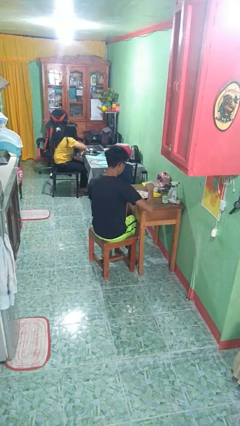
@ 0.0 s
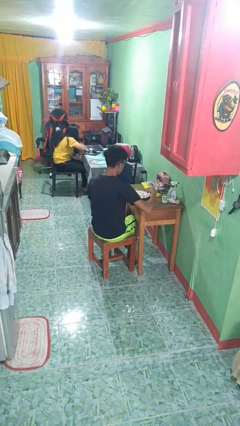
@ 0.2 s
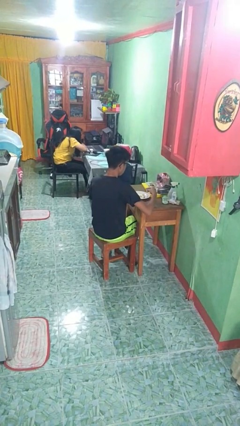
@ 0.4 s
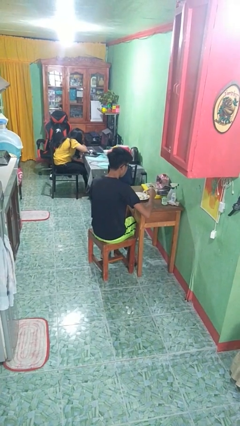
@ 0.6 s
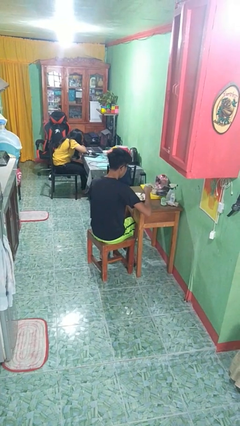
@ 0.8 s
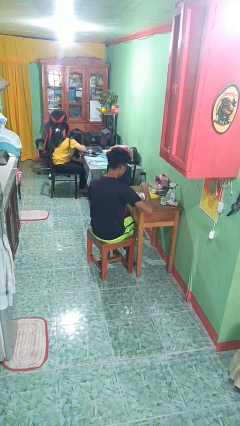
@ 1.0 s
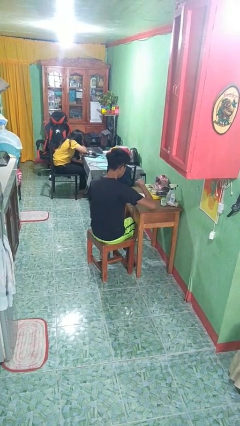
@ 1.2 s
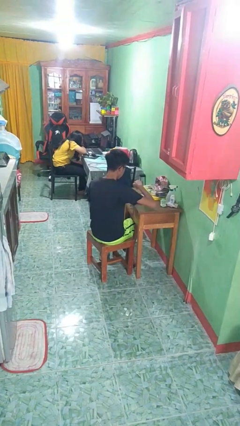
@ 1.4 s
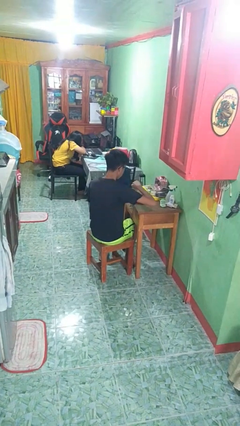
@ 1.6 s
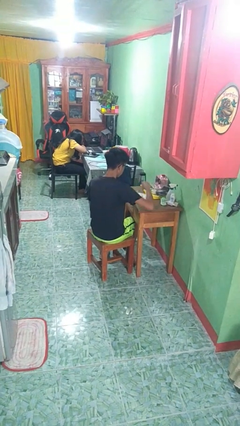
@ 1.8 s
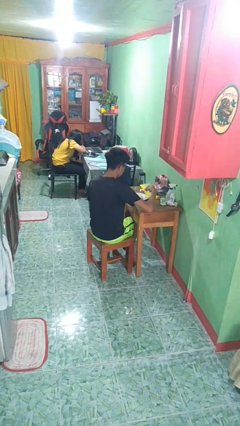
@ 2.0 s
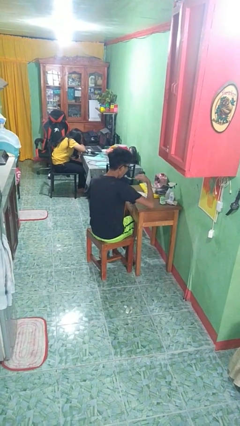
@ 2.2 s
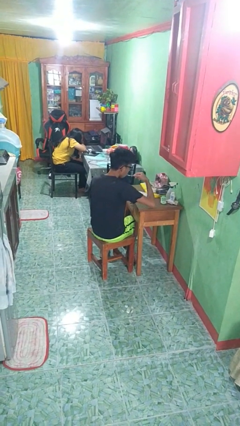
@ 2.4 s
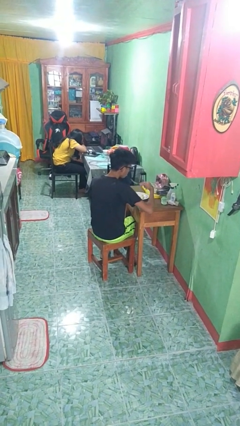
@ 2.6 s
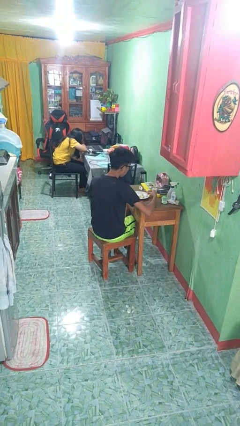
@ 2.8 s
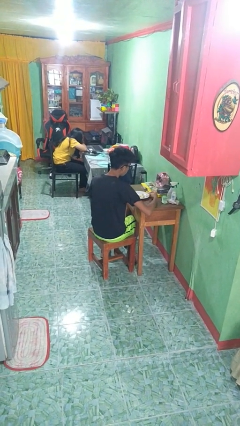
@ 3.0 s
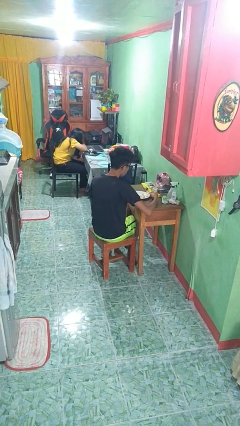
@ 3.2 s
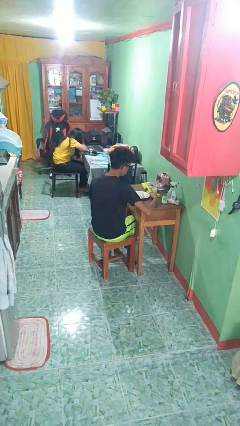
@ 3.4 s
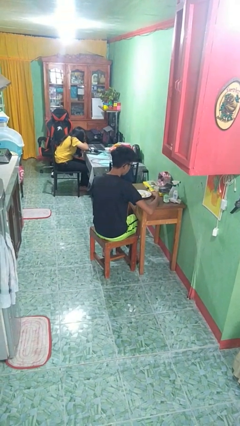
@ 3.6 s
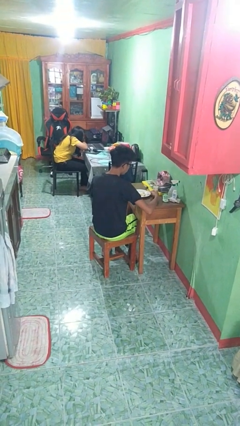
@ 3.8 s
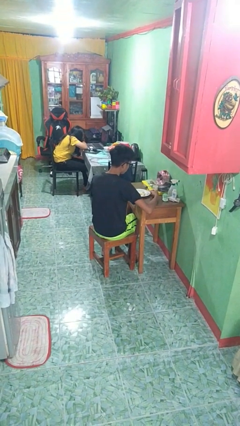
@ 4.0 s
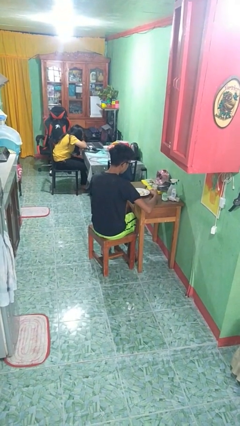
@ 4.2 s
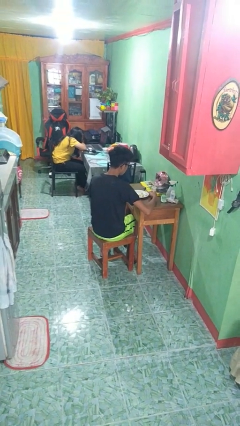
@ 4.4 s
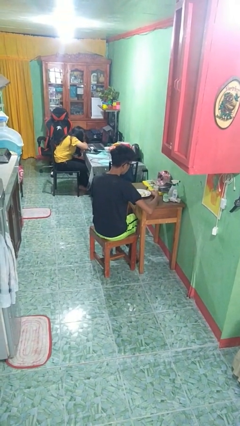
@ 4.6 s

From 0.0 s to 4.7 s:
person eats with utensil

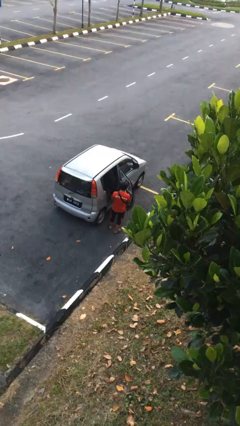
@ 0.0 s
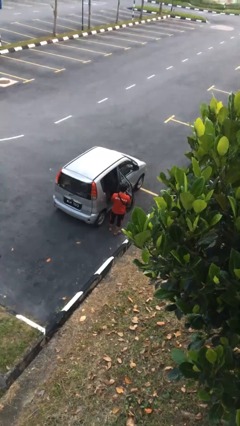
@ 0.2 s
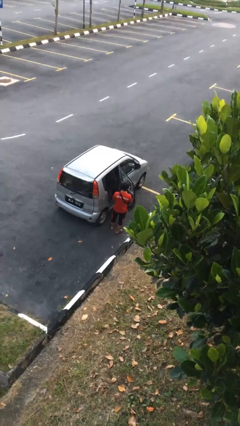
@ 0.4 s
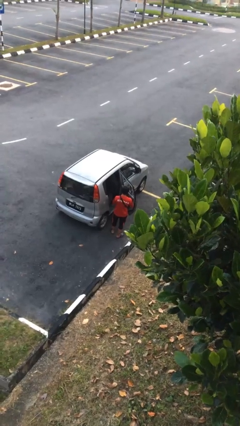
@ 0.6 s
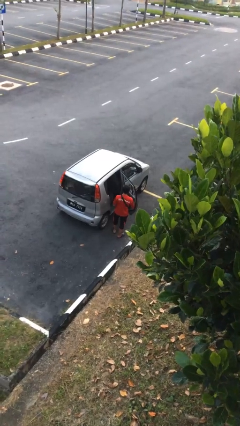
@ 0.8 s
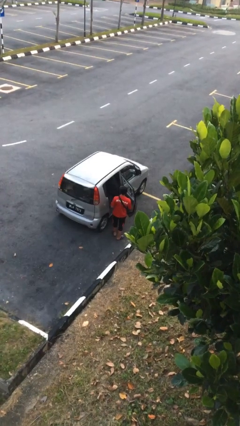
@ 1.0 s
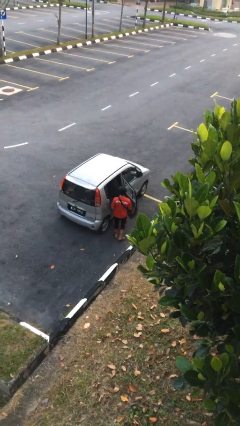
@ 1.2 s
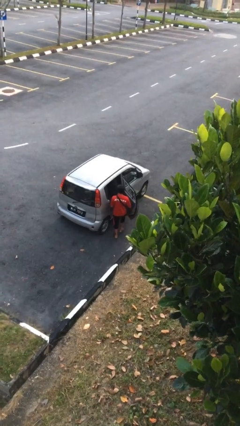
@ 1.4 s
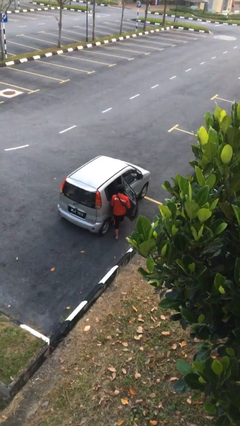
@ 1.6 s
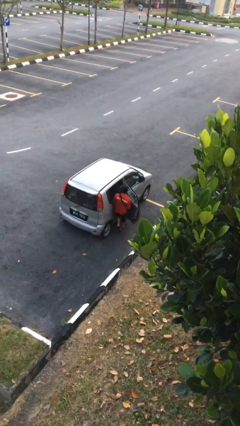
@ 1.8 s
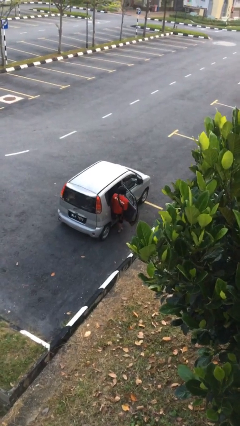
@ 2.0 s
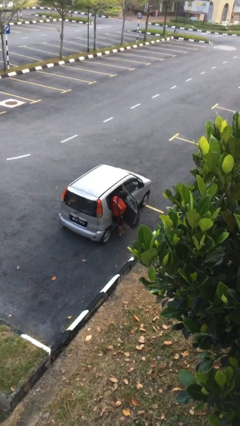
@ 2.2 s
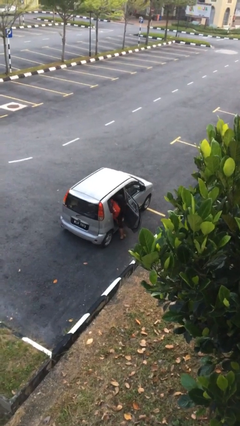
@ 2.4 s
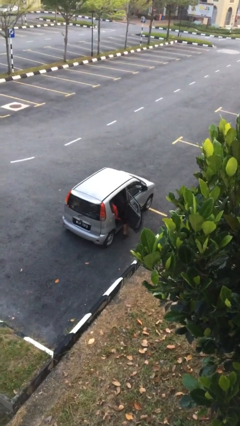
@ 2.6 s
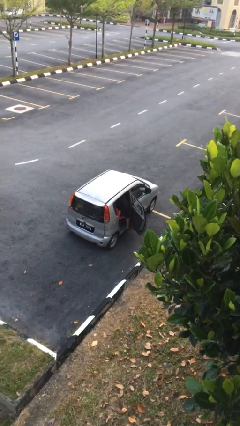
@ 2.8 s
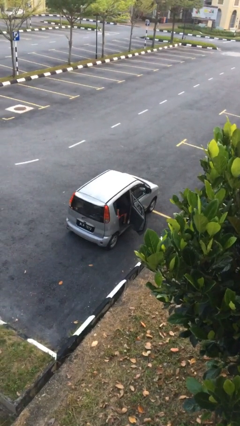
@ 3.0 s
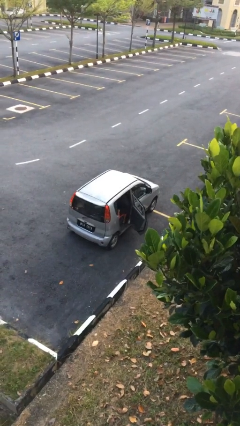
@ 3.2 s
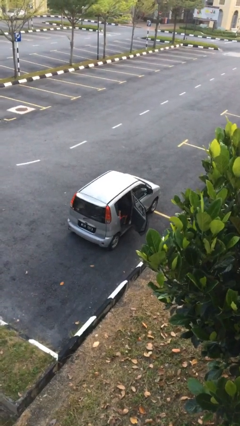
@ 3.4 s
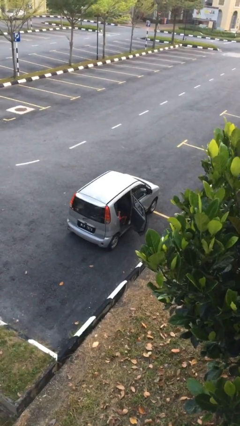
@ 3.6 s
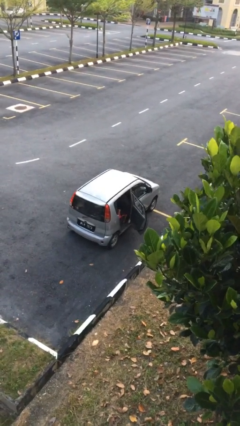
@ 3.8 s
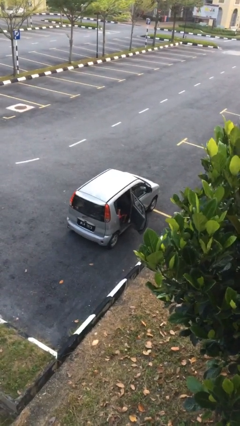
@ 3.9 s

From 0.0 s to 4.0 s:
person enters car

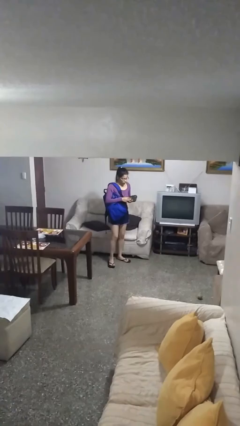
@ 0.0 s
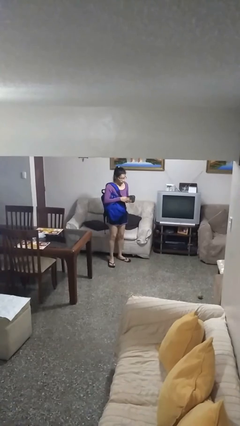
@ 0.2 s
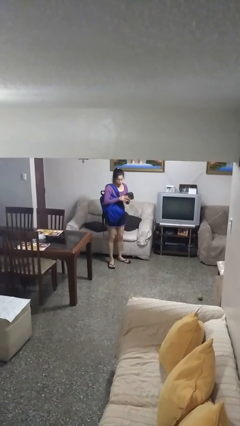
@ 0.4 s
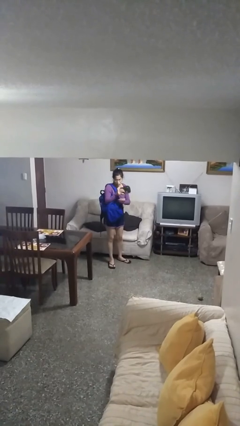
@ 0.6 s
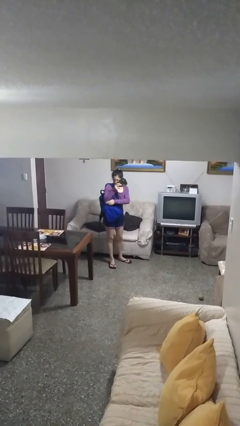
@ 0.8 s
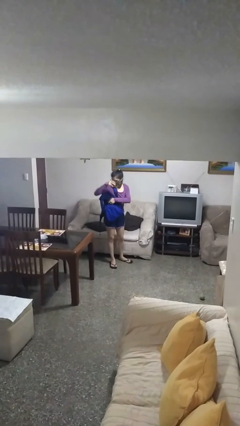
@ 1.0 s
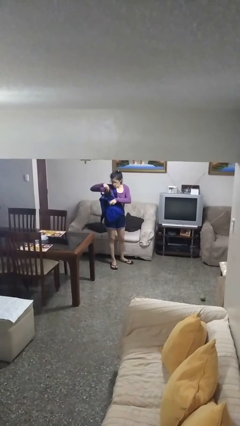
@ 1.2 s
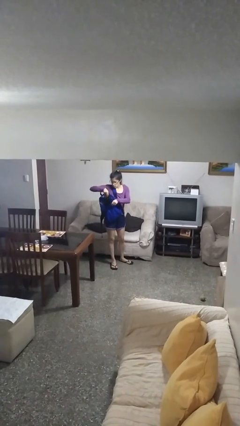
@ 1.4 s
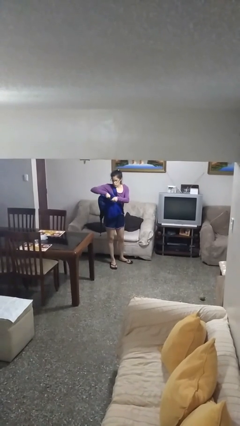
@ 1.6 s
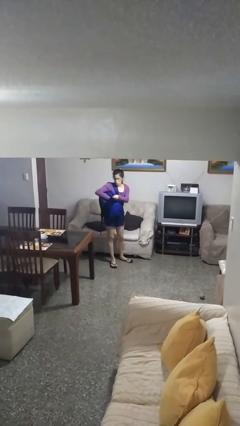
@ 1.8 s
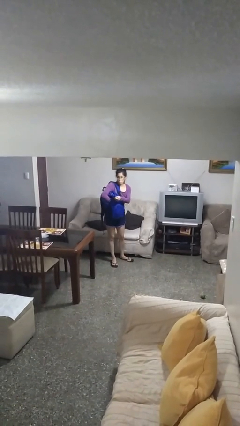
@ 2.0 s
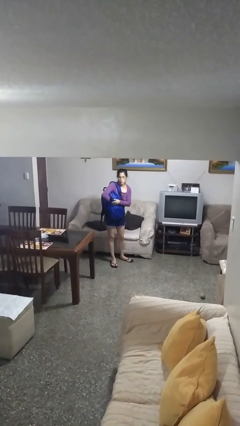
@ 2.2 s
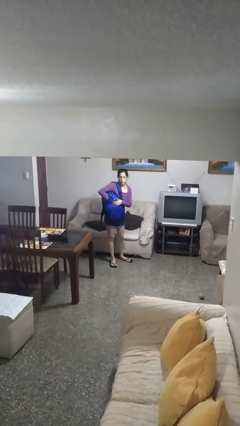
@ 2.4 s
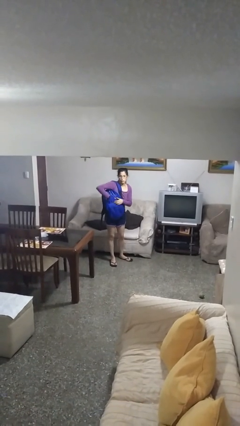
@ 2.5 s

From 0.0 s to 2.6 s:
person puts object into backpack

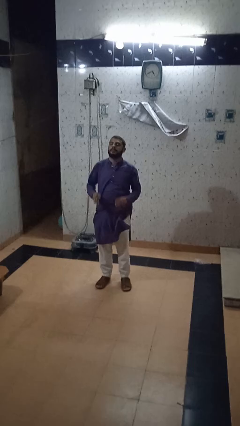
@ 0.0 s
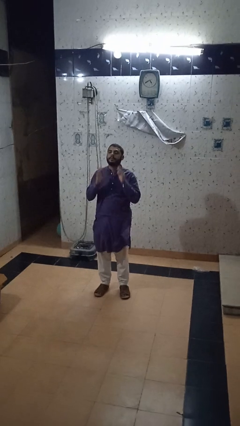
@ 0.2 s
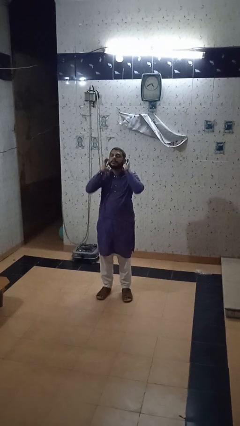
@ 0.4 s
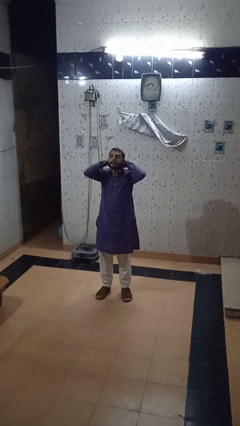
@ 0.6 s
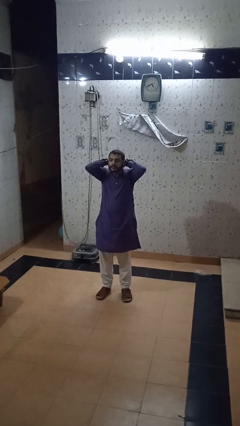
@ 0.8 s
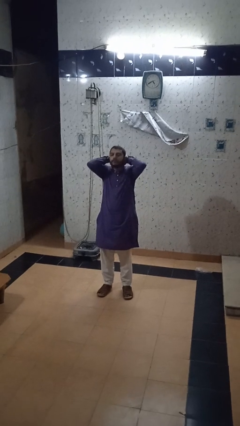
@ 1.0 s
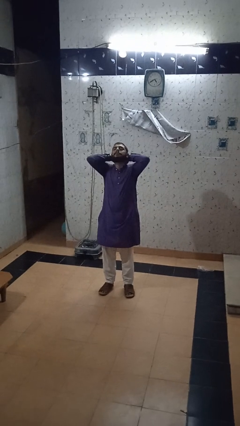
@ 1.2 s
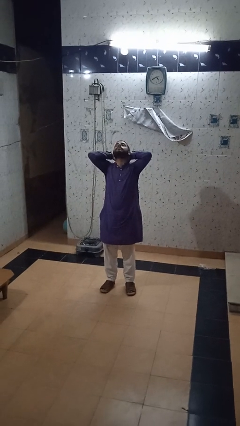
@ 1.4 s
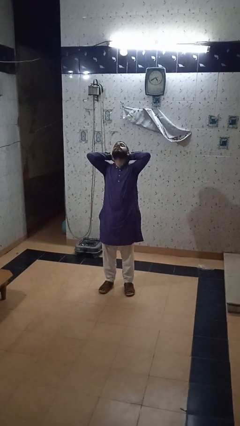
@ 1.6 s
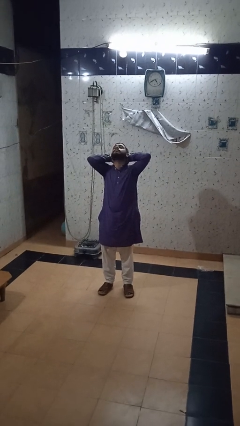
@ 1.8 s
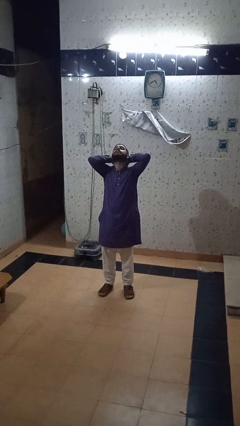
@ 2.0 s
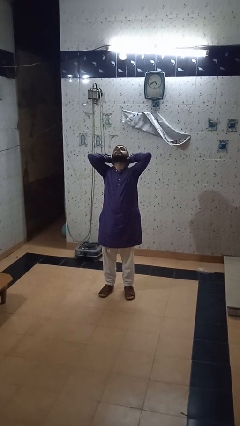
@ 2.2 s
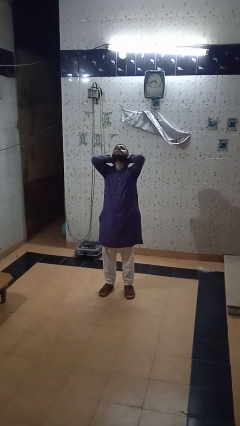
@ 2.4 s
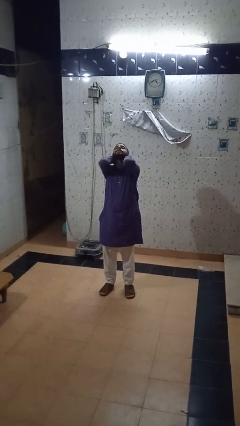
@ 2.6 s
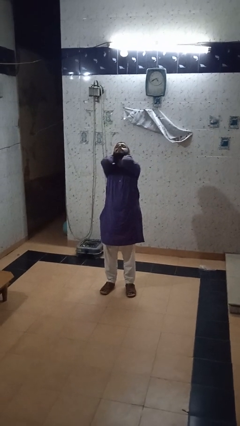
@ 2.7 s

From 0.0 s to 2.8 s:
person stretches arms over head

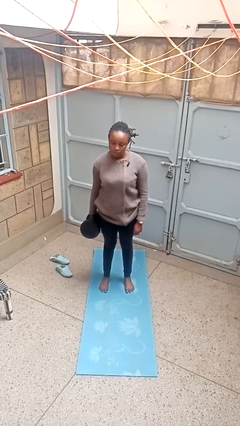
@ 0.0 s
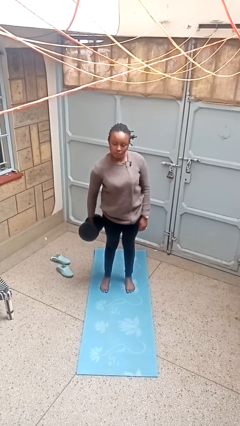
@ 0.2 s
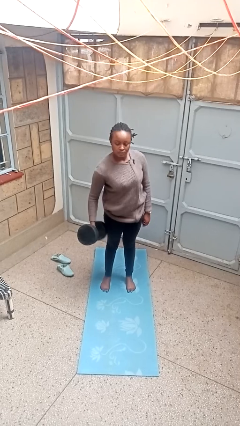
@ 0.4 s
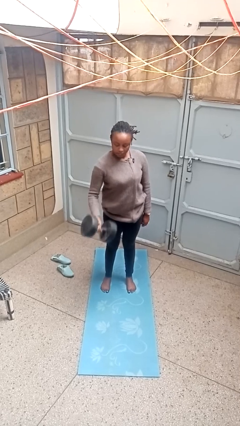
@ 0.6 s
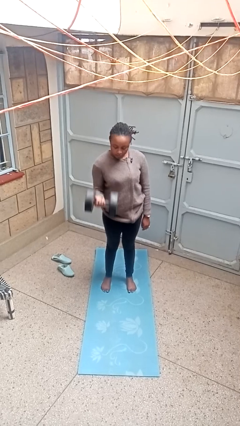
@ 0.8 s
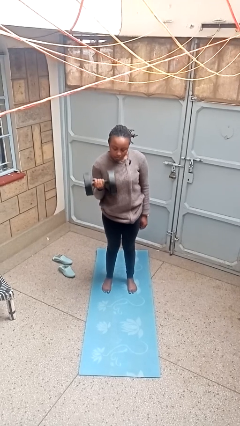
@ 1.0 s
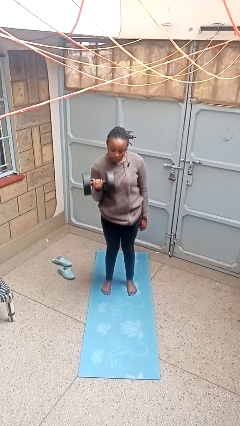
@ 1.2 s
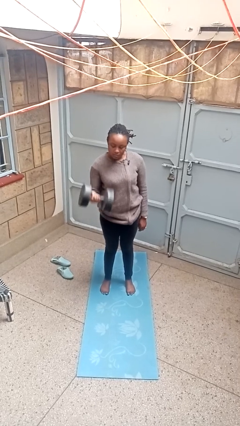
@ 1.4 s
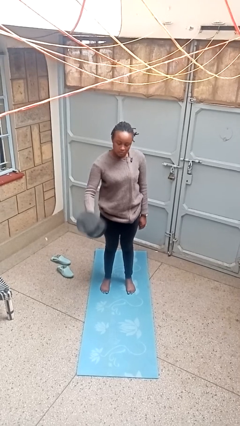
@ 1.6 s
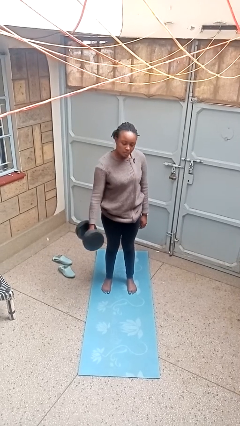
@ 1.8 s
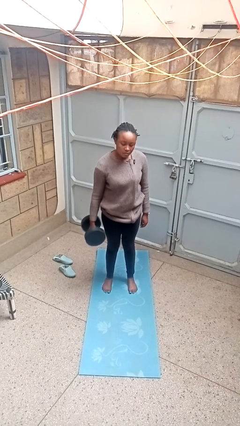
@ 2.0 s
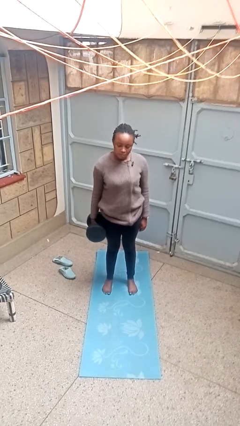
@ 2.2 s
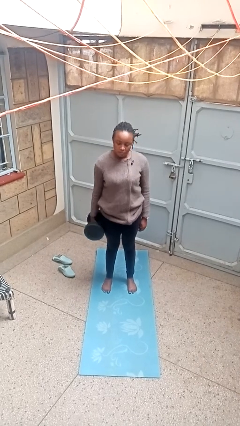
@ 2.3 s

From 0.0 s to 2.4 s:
person lifts dumbbells

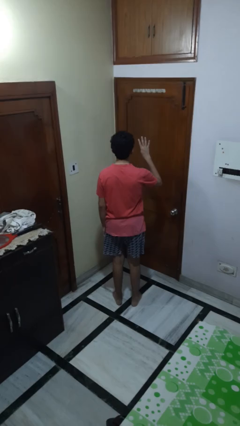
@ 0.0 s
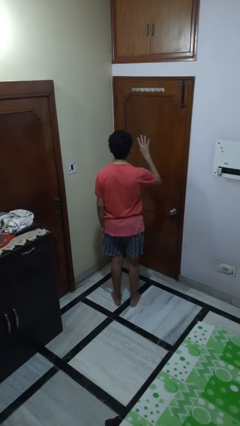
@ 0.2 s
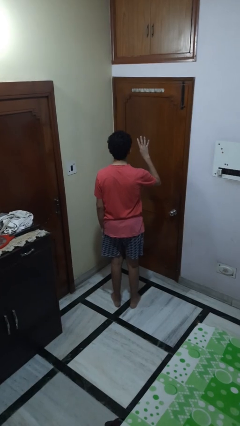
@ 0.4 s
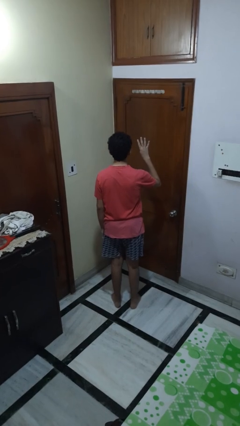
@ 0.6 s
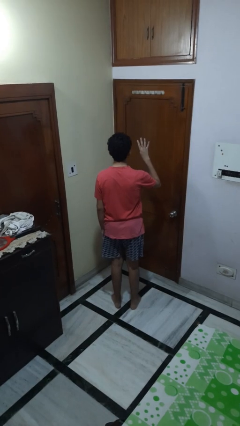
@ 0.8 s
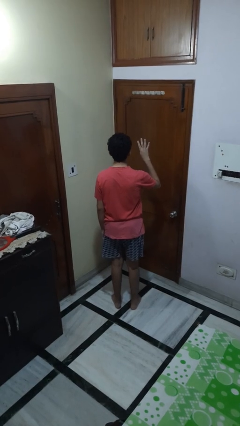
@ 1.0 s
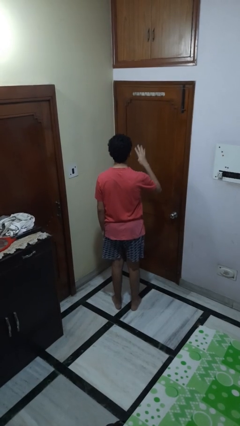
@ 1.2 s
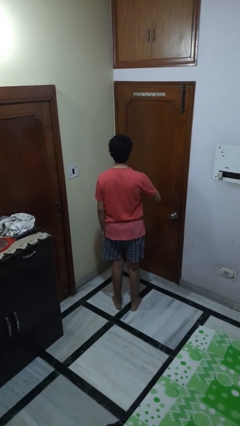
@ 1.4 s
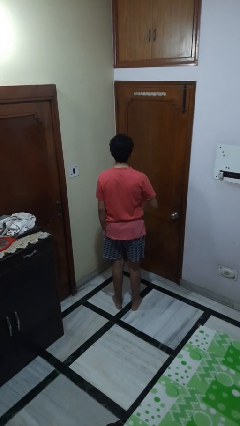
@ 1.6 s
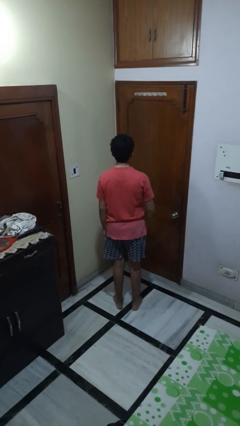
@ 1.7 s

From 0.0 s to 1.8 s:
person gestures number four
